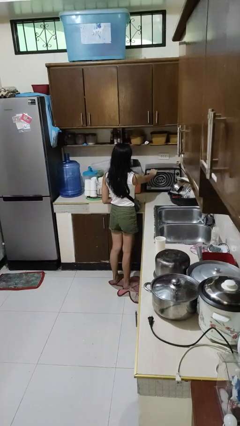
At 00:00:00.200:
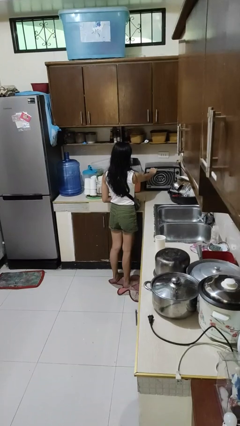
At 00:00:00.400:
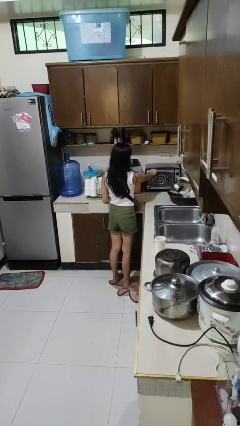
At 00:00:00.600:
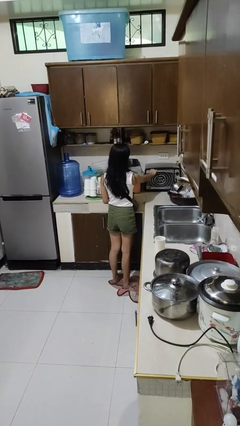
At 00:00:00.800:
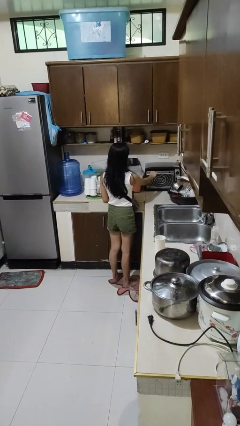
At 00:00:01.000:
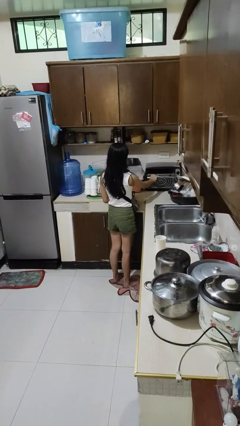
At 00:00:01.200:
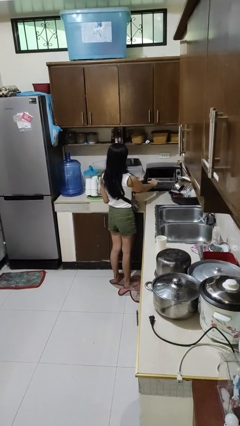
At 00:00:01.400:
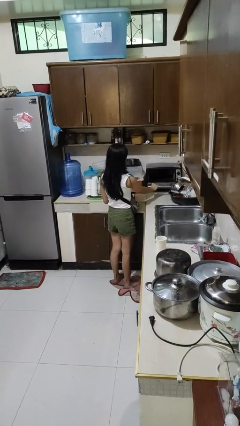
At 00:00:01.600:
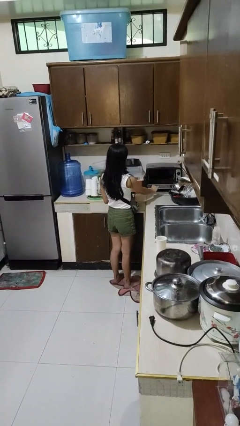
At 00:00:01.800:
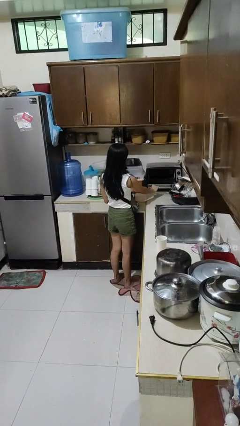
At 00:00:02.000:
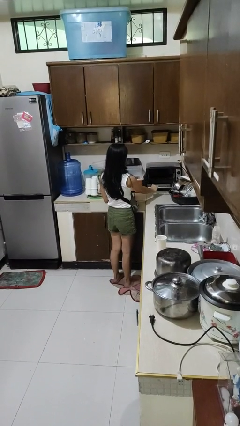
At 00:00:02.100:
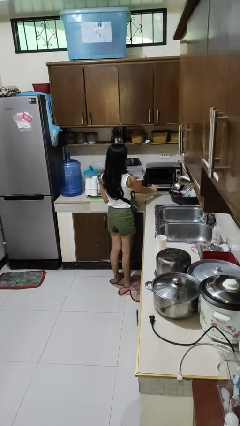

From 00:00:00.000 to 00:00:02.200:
person opens microwave

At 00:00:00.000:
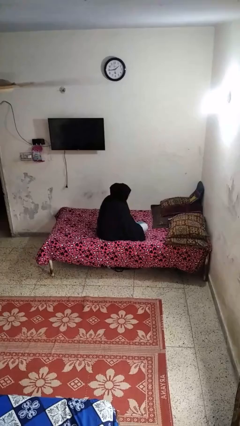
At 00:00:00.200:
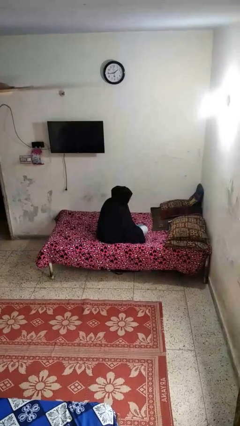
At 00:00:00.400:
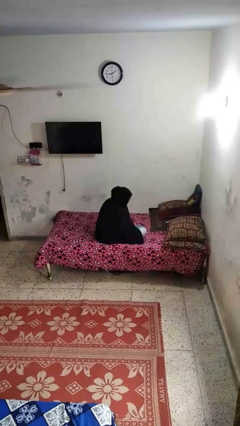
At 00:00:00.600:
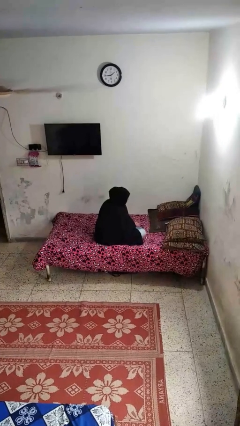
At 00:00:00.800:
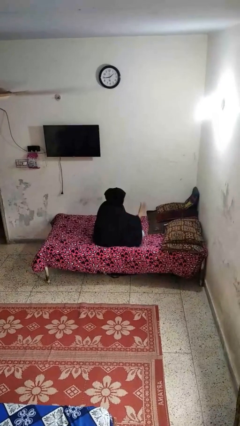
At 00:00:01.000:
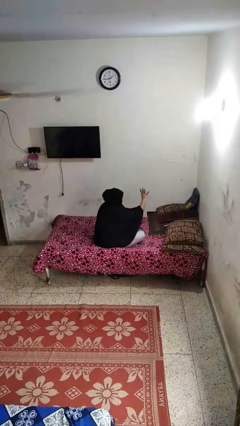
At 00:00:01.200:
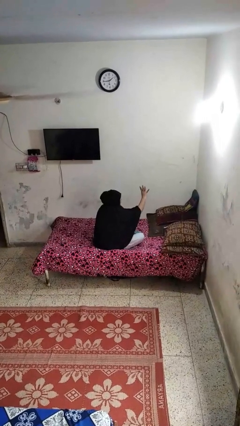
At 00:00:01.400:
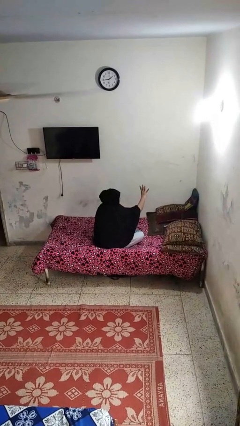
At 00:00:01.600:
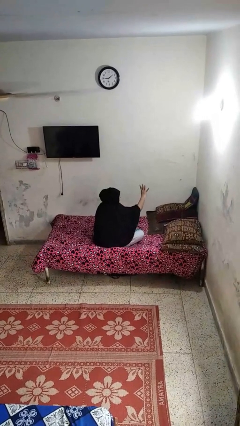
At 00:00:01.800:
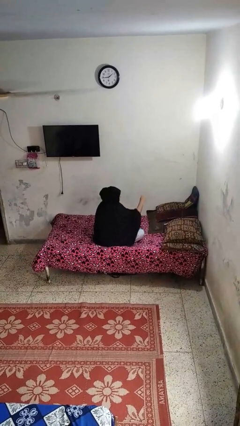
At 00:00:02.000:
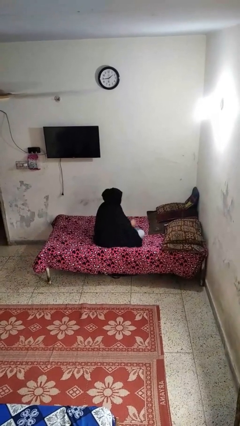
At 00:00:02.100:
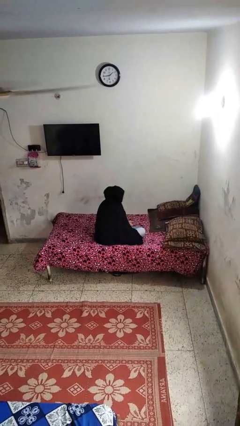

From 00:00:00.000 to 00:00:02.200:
person gestures number four

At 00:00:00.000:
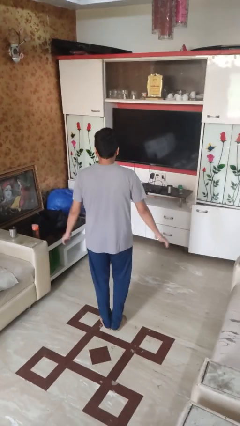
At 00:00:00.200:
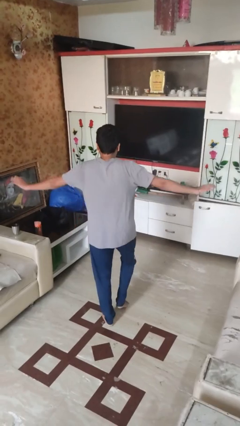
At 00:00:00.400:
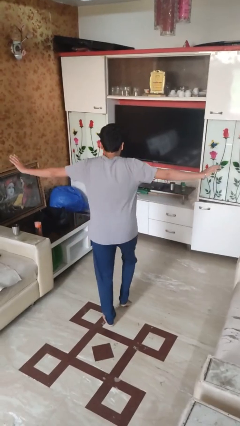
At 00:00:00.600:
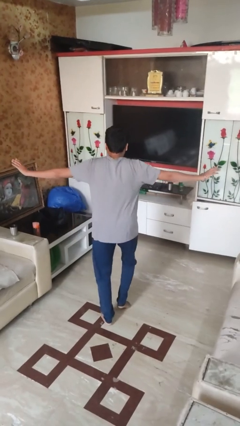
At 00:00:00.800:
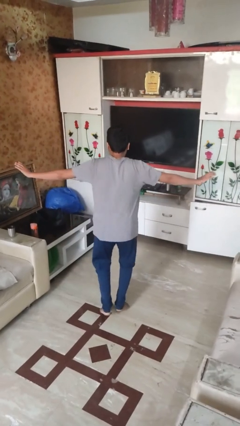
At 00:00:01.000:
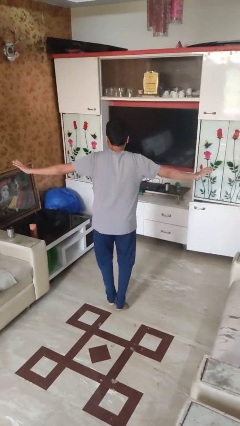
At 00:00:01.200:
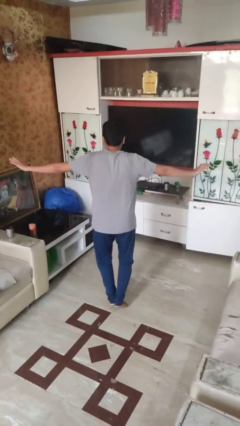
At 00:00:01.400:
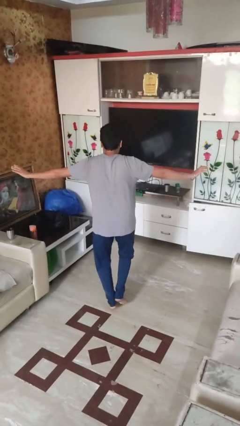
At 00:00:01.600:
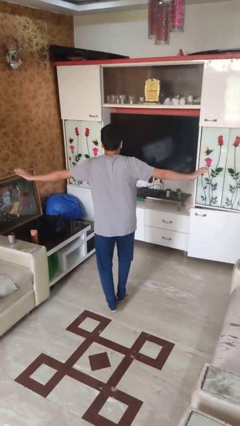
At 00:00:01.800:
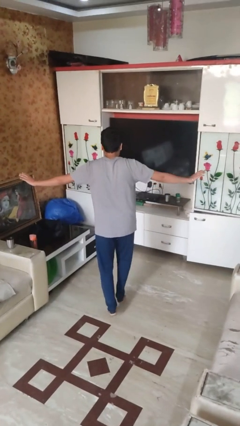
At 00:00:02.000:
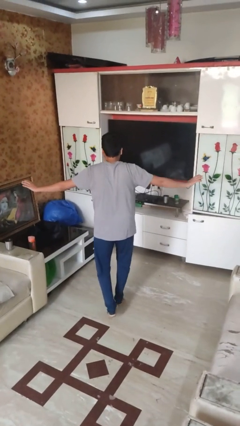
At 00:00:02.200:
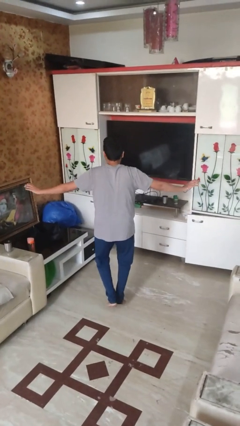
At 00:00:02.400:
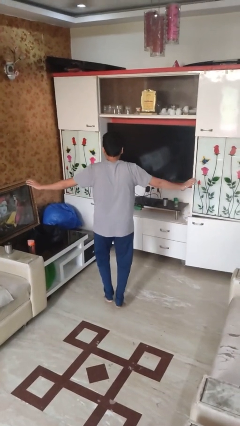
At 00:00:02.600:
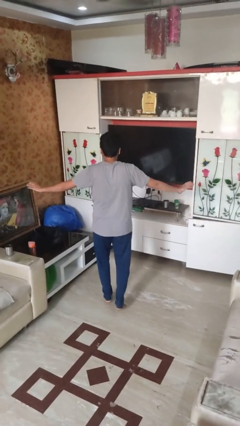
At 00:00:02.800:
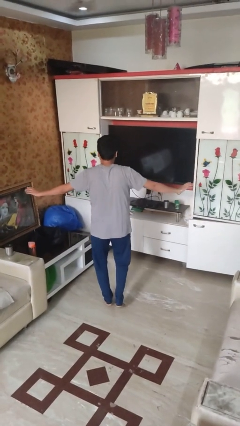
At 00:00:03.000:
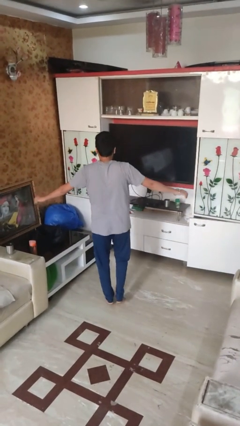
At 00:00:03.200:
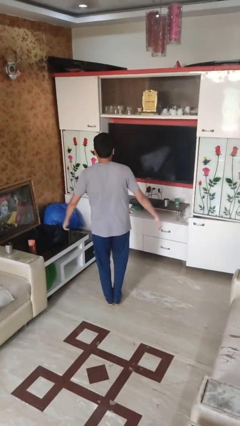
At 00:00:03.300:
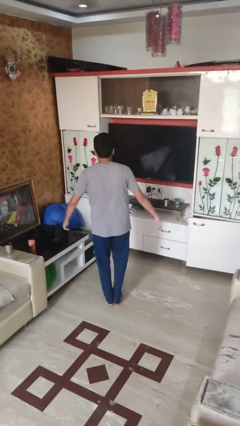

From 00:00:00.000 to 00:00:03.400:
person walks tiptoe

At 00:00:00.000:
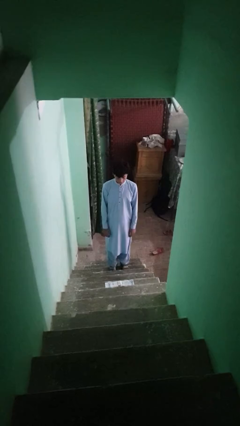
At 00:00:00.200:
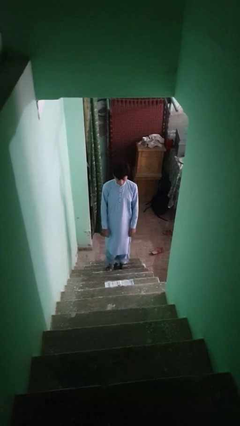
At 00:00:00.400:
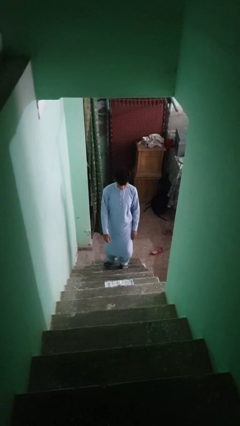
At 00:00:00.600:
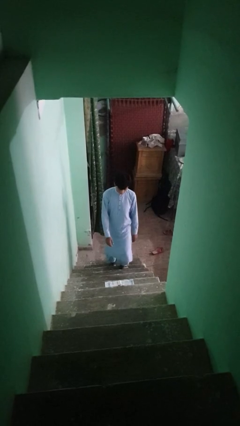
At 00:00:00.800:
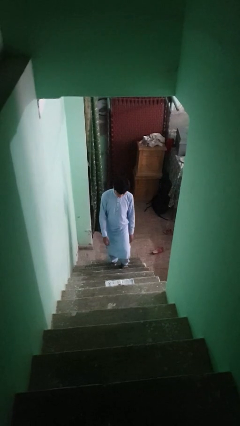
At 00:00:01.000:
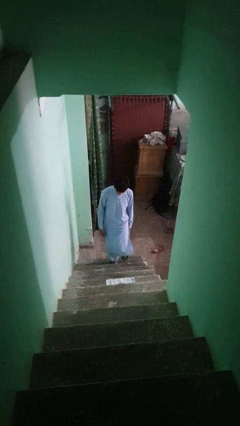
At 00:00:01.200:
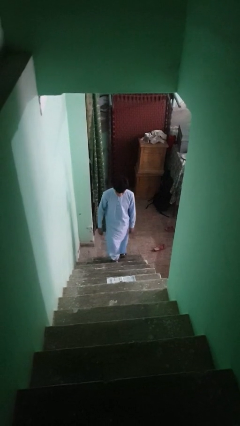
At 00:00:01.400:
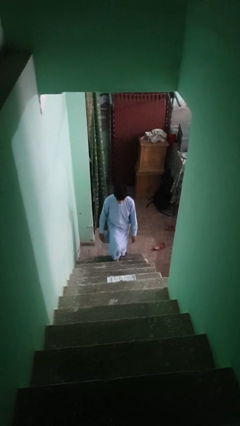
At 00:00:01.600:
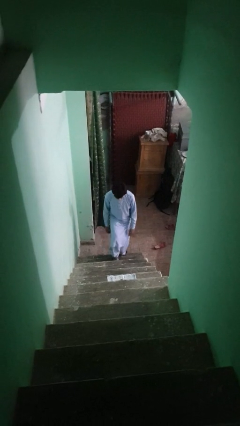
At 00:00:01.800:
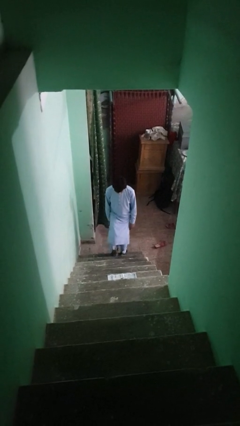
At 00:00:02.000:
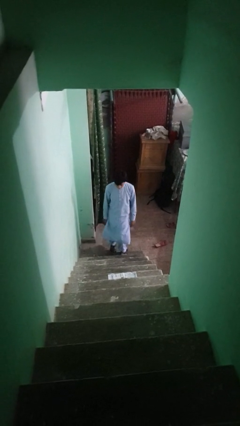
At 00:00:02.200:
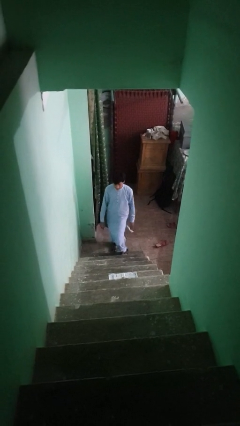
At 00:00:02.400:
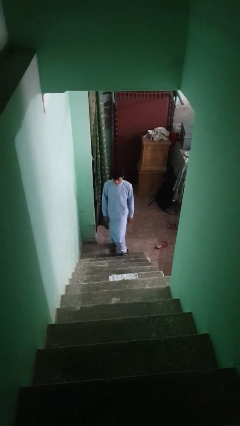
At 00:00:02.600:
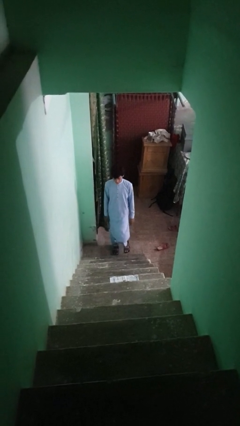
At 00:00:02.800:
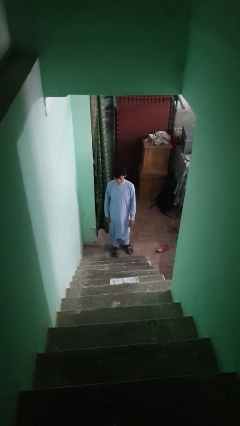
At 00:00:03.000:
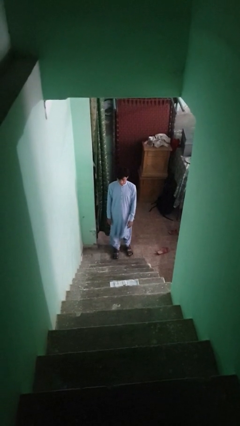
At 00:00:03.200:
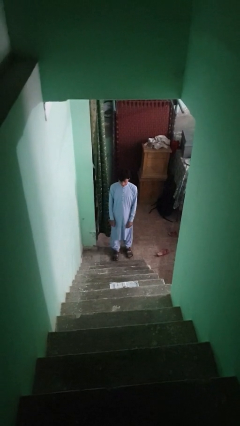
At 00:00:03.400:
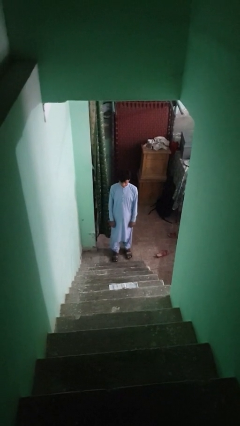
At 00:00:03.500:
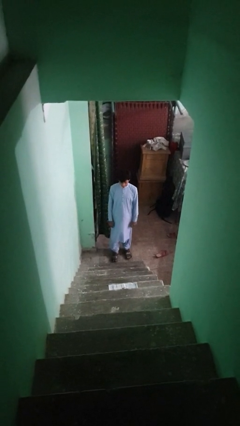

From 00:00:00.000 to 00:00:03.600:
person climbs down stairs

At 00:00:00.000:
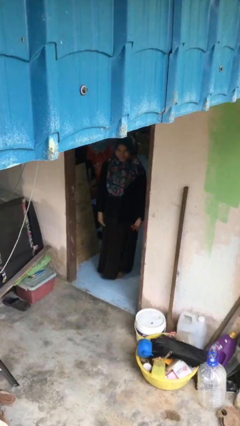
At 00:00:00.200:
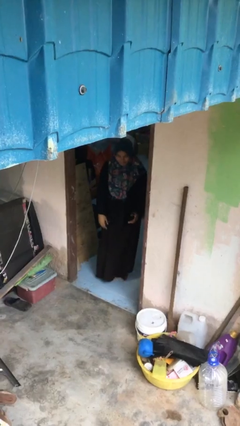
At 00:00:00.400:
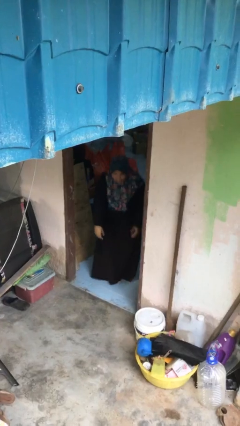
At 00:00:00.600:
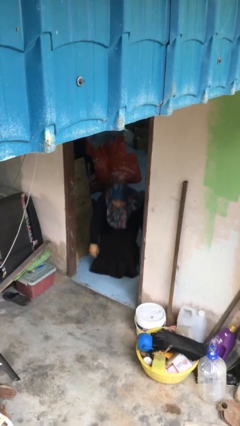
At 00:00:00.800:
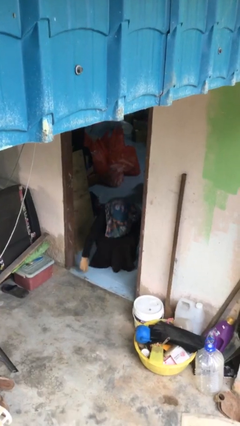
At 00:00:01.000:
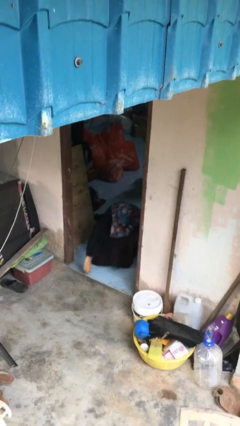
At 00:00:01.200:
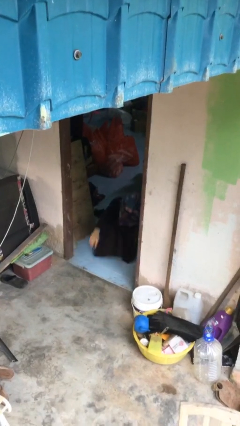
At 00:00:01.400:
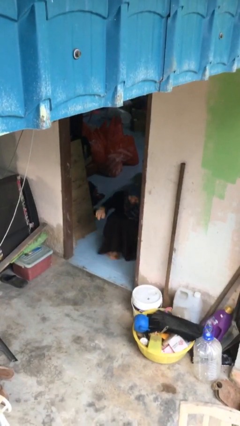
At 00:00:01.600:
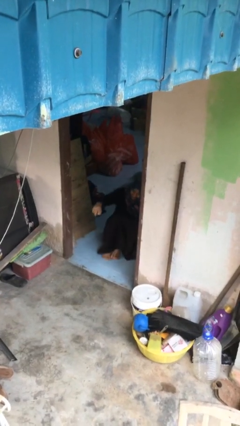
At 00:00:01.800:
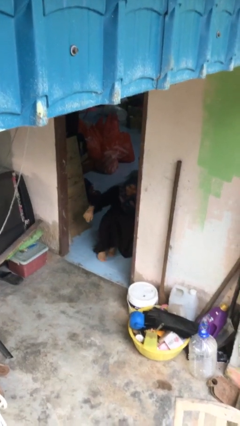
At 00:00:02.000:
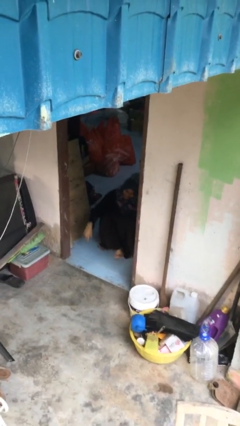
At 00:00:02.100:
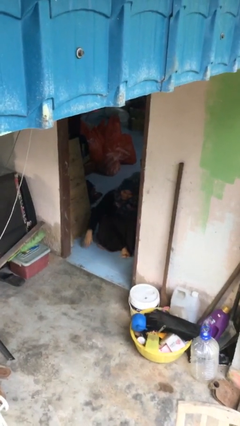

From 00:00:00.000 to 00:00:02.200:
person sits down

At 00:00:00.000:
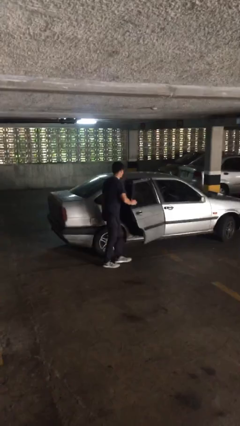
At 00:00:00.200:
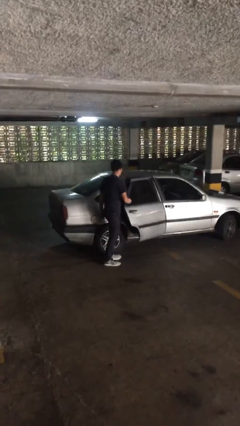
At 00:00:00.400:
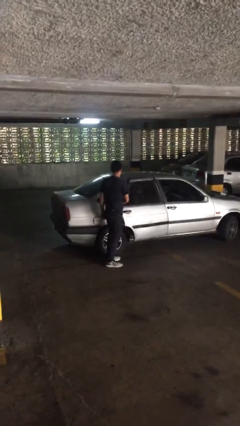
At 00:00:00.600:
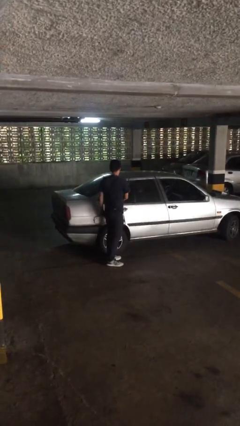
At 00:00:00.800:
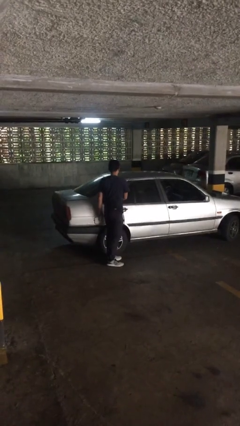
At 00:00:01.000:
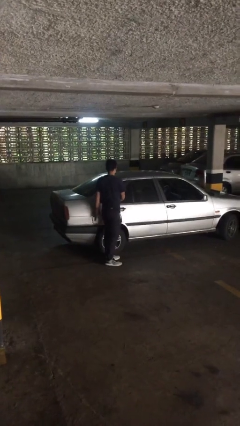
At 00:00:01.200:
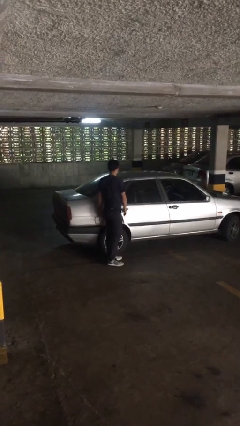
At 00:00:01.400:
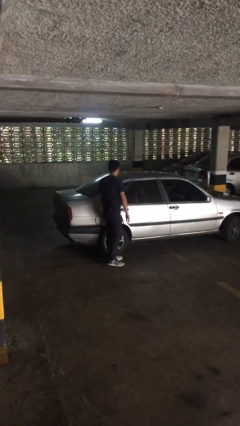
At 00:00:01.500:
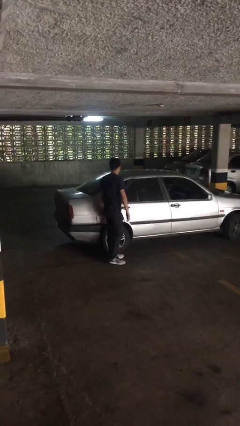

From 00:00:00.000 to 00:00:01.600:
person closes car door

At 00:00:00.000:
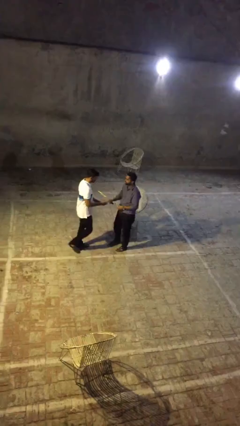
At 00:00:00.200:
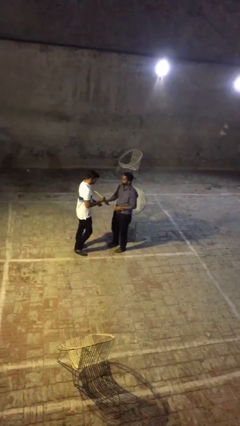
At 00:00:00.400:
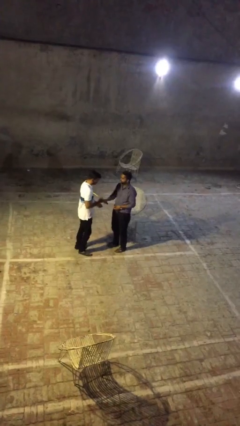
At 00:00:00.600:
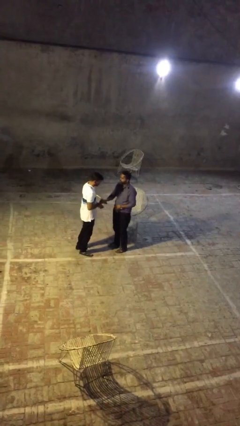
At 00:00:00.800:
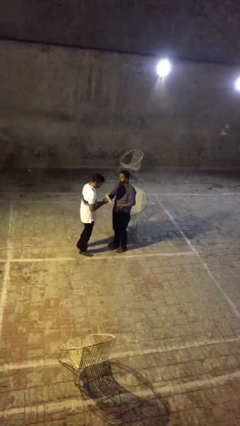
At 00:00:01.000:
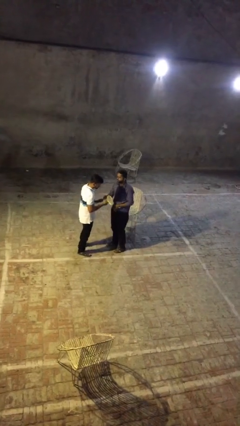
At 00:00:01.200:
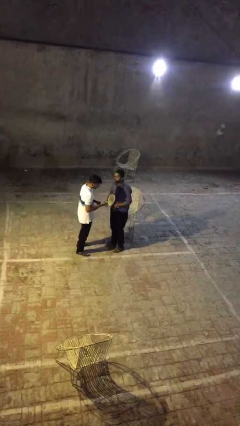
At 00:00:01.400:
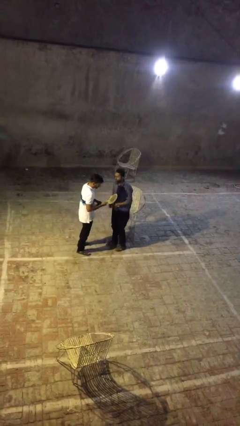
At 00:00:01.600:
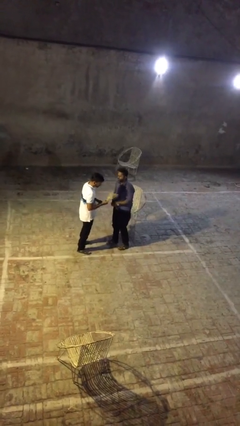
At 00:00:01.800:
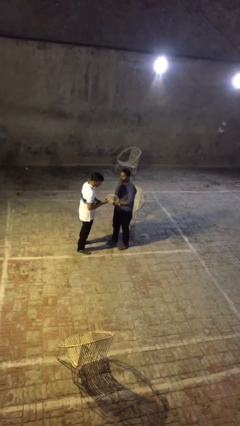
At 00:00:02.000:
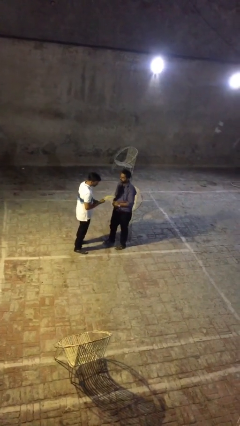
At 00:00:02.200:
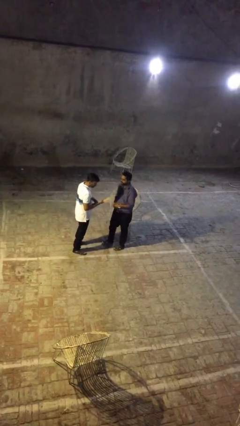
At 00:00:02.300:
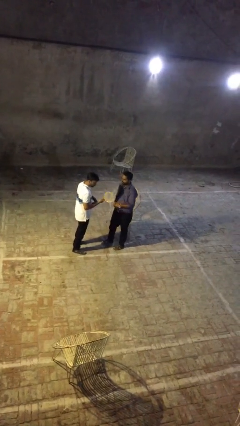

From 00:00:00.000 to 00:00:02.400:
person transfers object to person
